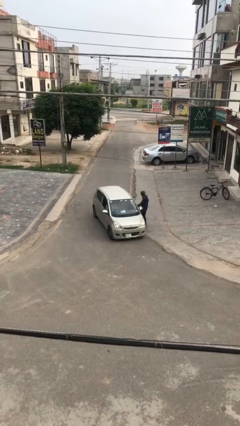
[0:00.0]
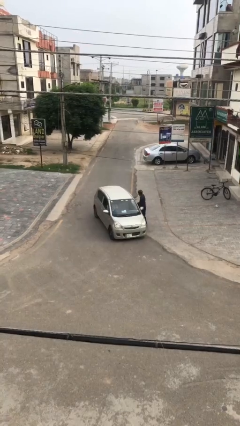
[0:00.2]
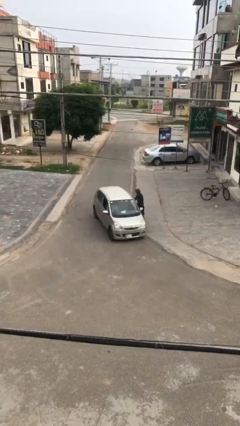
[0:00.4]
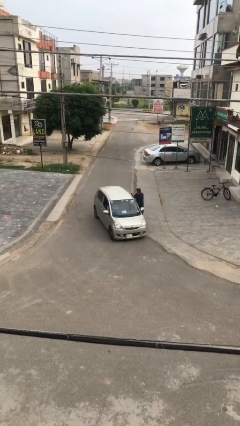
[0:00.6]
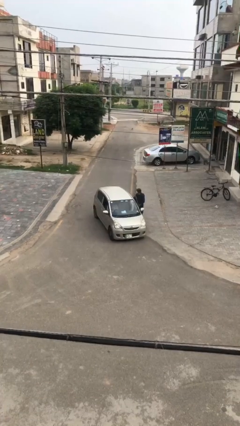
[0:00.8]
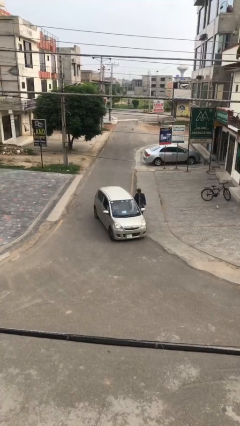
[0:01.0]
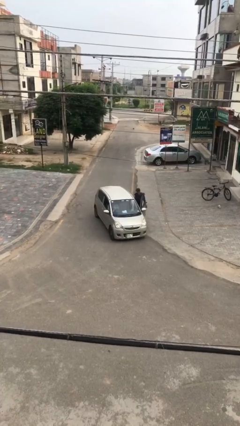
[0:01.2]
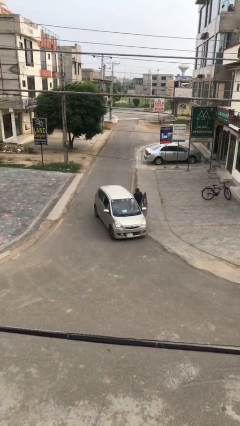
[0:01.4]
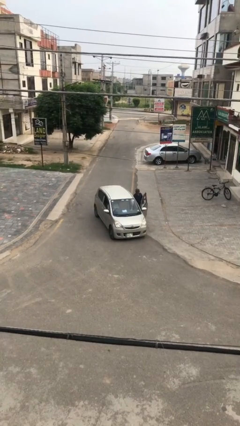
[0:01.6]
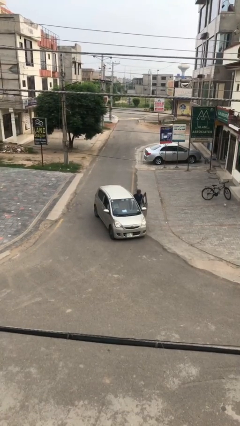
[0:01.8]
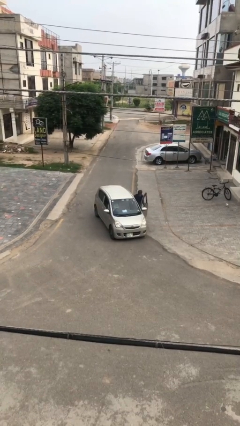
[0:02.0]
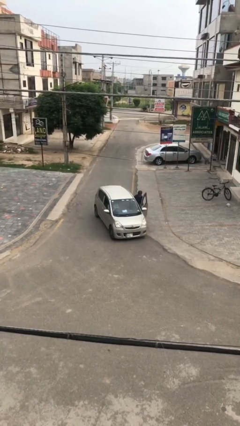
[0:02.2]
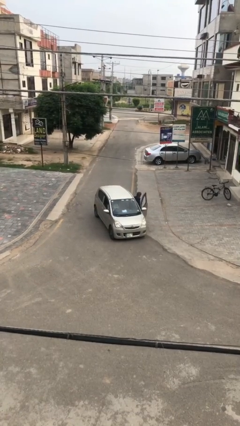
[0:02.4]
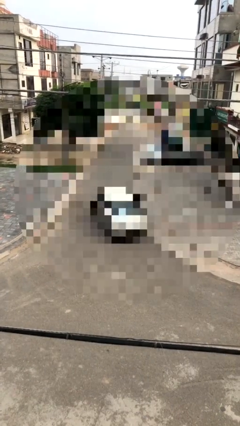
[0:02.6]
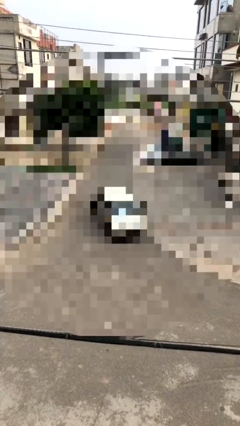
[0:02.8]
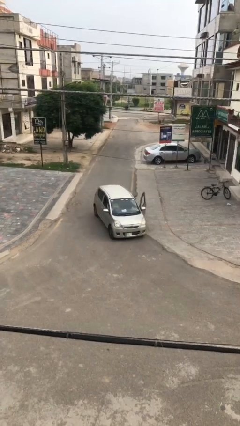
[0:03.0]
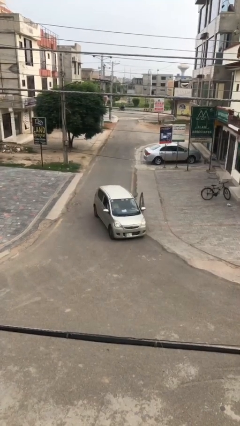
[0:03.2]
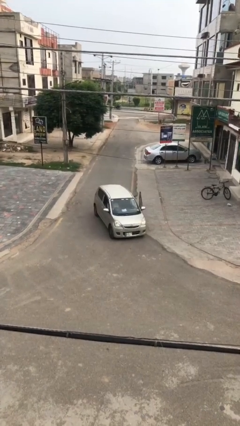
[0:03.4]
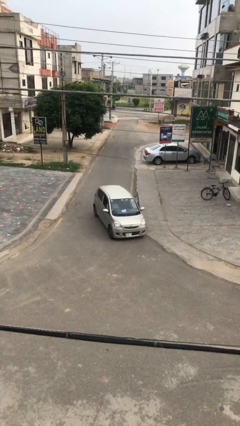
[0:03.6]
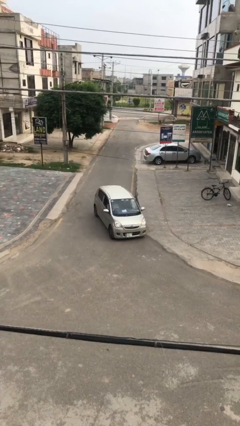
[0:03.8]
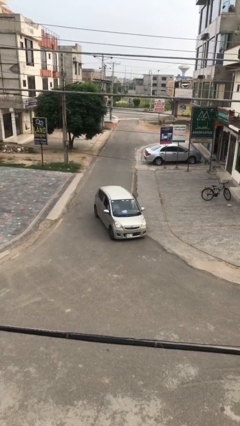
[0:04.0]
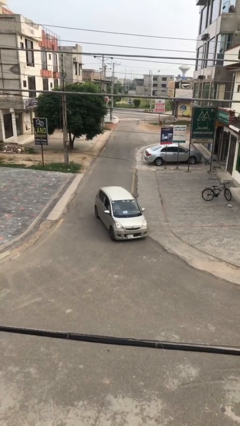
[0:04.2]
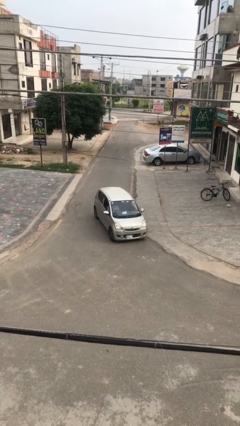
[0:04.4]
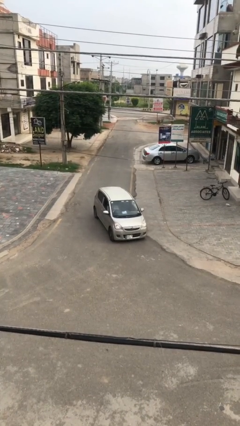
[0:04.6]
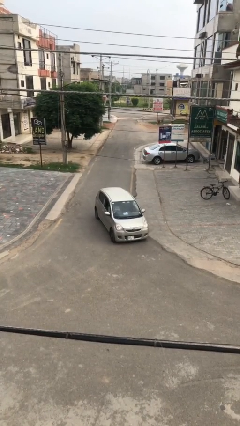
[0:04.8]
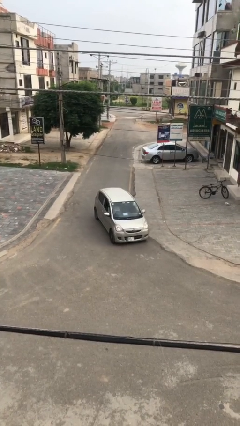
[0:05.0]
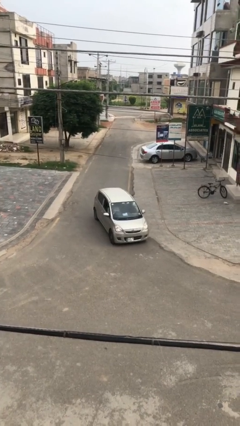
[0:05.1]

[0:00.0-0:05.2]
car picks up person

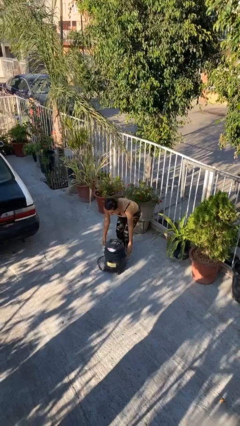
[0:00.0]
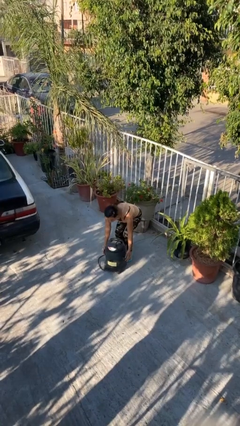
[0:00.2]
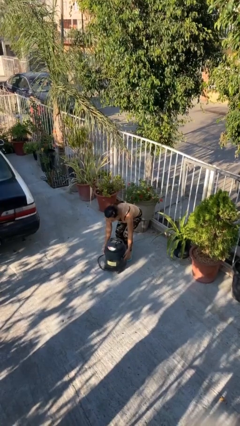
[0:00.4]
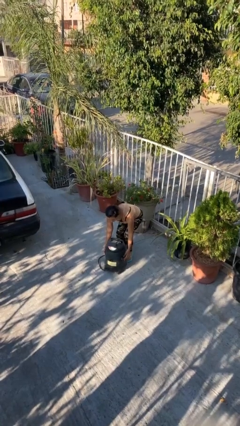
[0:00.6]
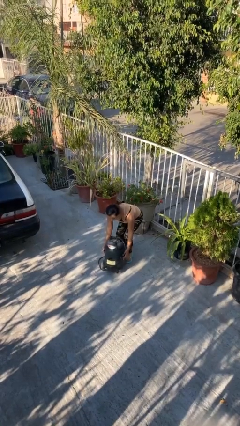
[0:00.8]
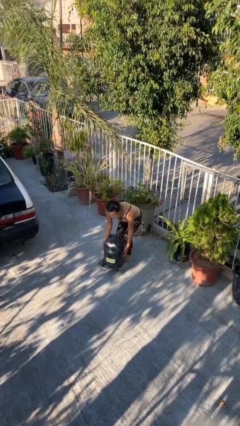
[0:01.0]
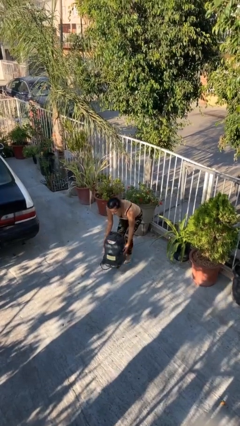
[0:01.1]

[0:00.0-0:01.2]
person picks up object from floor

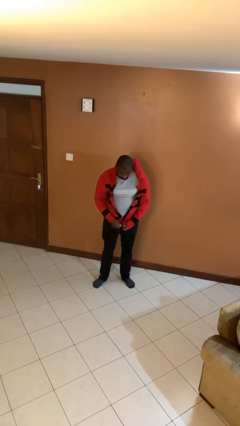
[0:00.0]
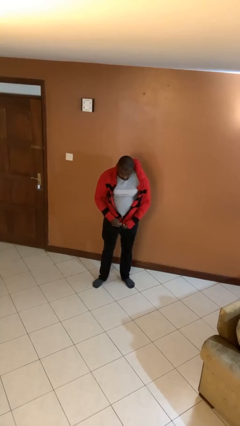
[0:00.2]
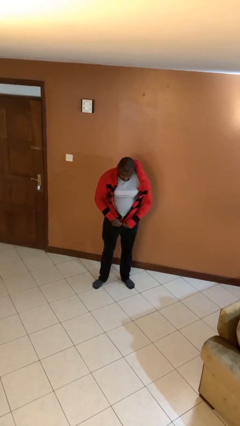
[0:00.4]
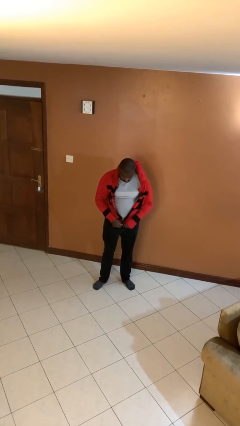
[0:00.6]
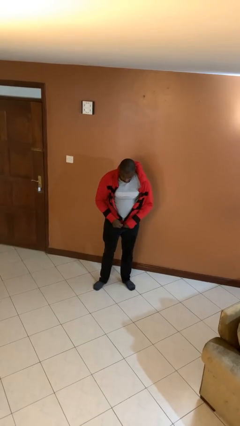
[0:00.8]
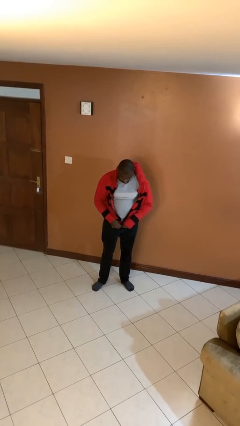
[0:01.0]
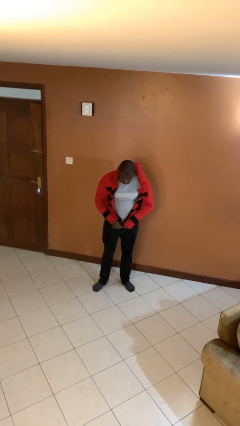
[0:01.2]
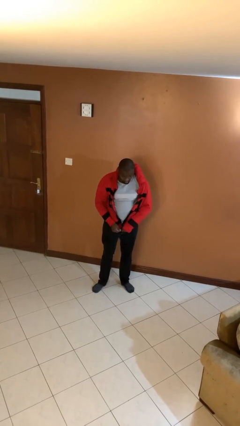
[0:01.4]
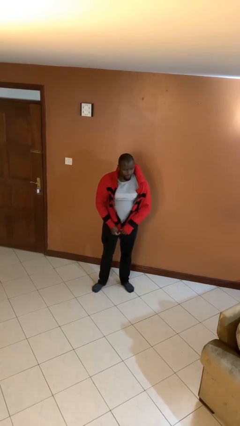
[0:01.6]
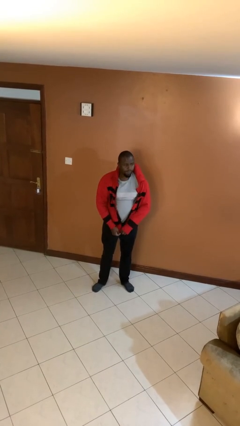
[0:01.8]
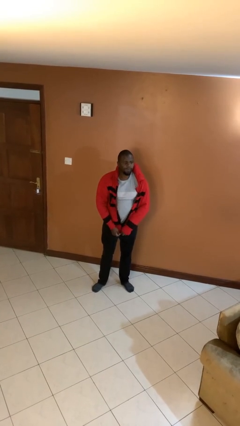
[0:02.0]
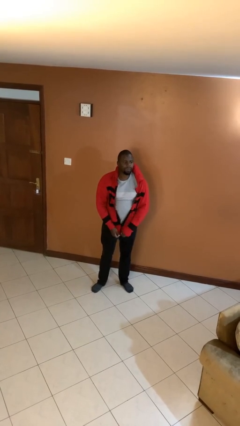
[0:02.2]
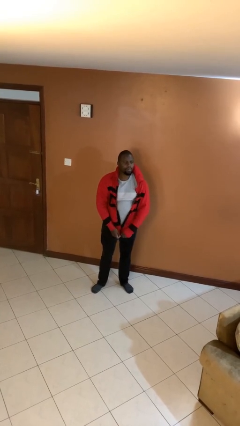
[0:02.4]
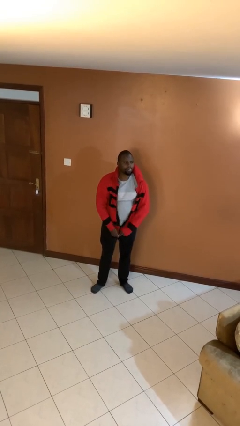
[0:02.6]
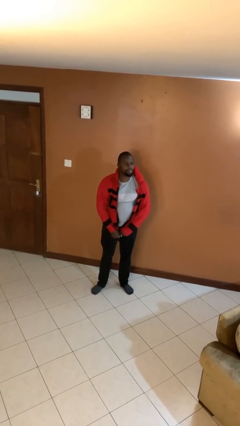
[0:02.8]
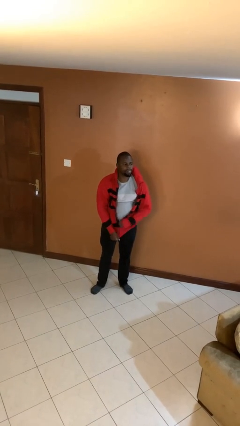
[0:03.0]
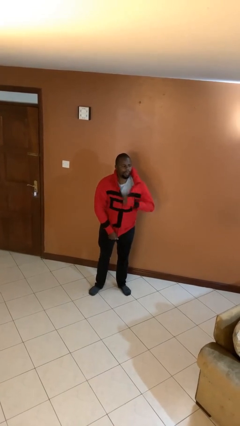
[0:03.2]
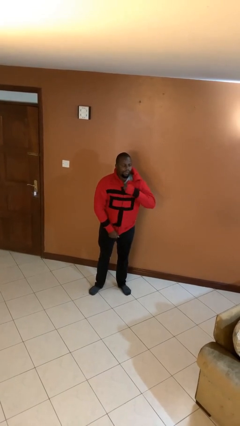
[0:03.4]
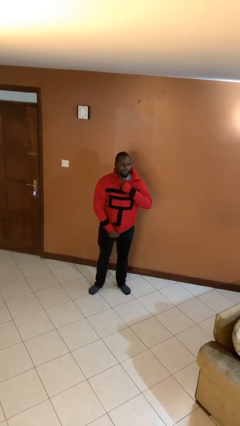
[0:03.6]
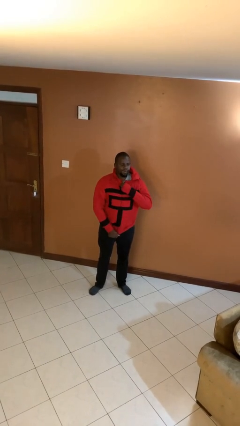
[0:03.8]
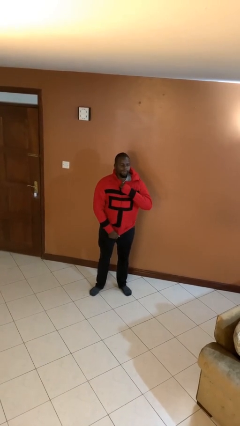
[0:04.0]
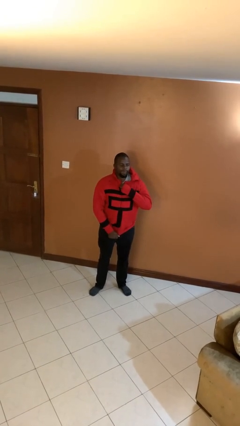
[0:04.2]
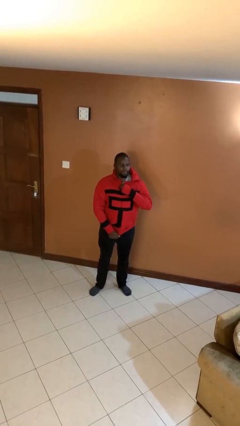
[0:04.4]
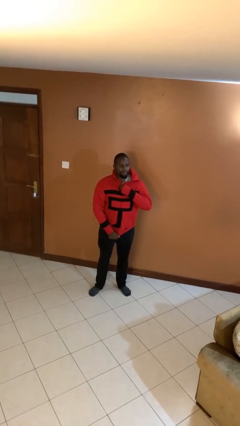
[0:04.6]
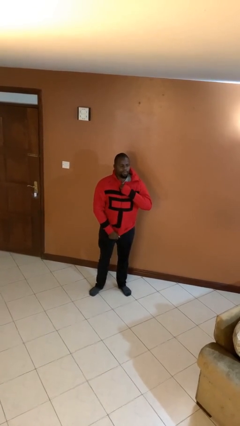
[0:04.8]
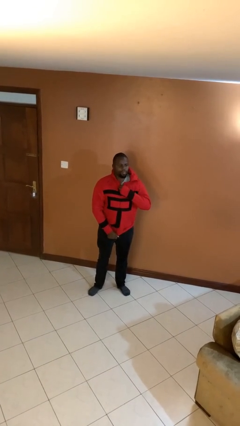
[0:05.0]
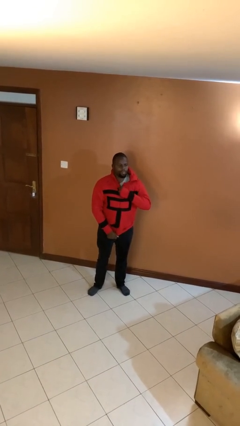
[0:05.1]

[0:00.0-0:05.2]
person zips up jacket

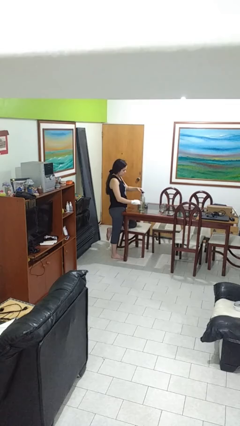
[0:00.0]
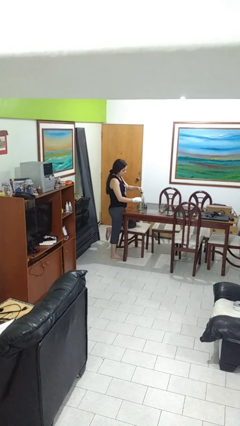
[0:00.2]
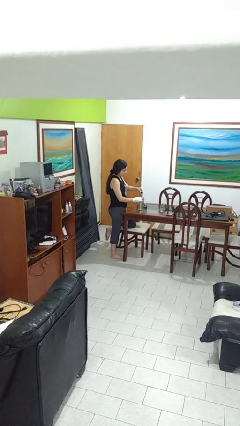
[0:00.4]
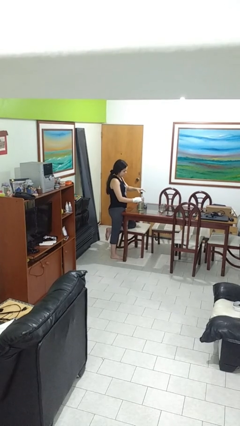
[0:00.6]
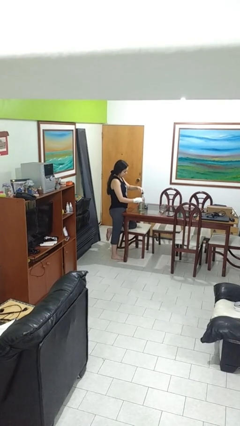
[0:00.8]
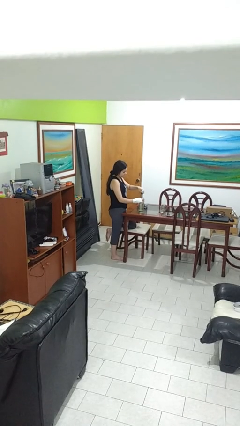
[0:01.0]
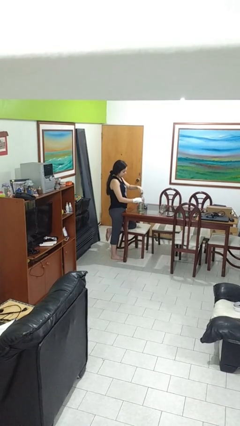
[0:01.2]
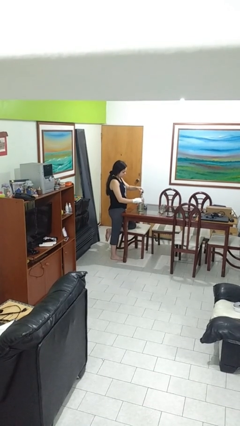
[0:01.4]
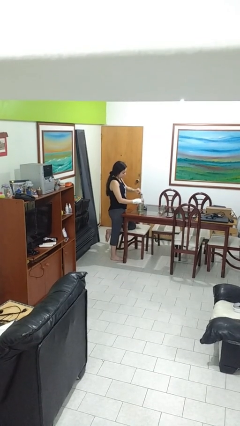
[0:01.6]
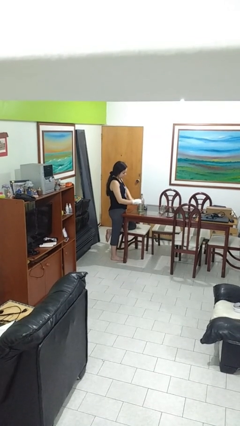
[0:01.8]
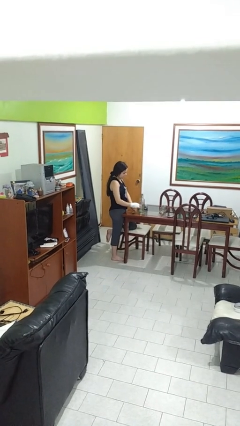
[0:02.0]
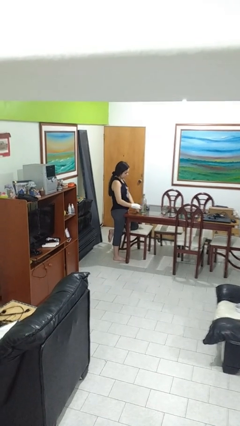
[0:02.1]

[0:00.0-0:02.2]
person unscrews lid from bottle

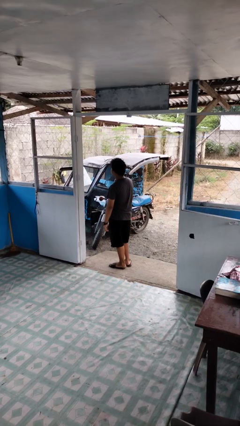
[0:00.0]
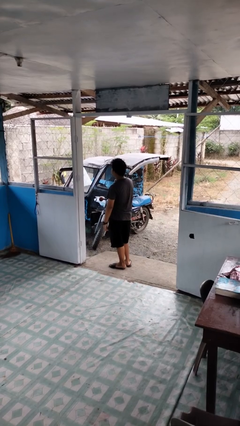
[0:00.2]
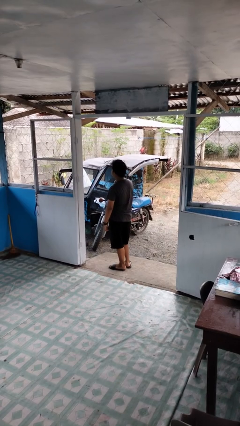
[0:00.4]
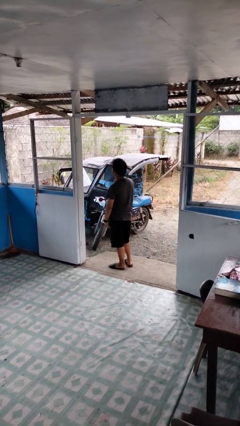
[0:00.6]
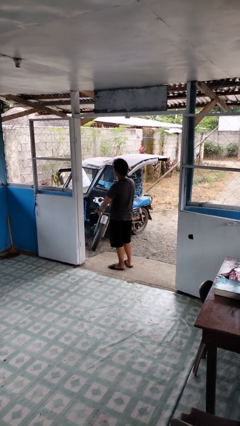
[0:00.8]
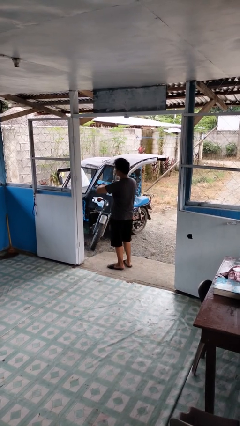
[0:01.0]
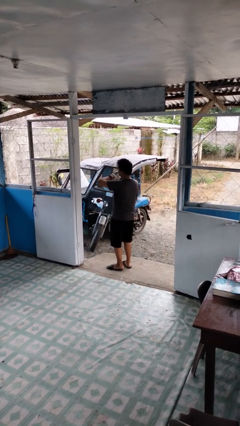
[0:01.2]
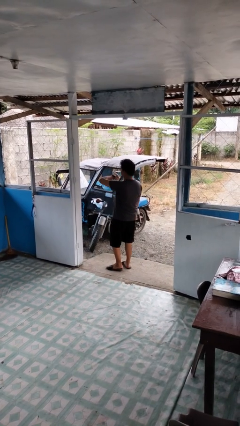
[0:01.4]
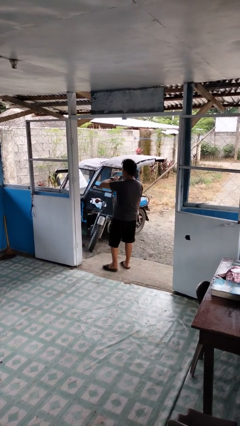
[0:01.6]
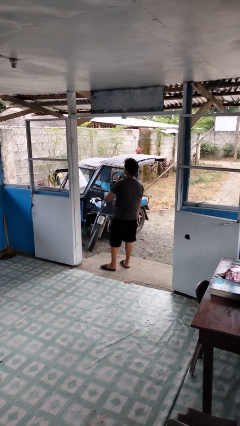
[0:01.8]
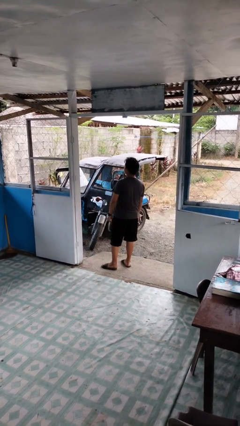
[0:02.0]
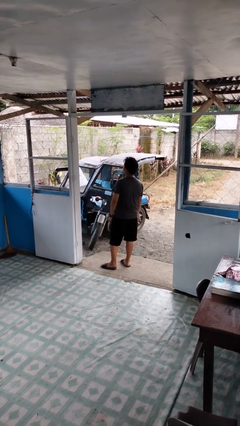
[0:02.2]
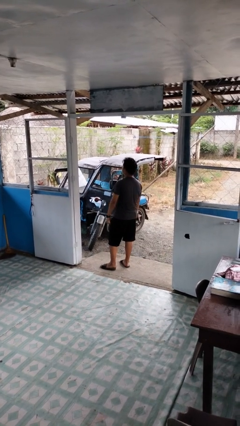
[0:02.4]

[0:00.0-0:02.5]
person looks at wristwatch

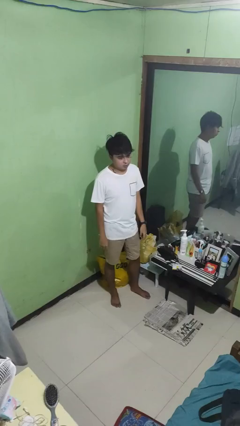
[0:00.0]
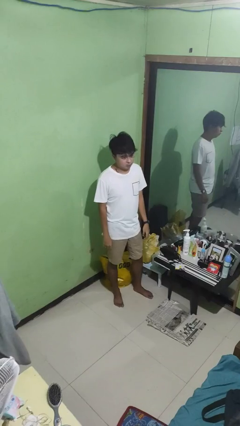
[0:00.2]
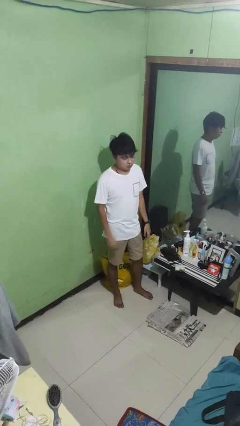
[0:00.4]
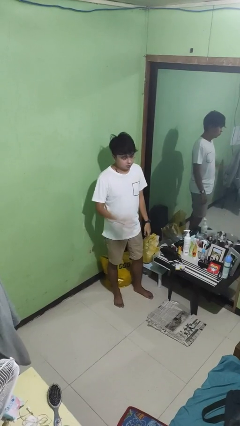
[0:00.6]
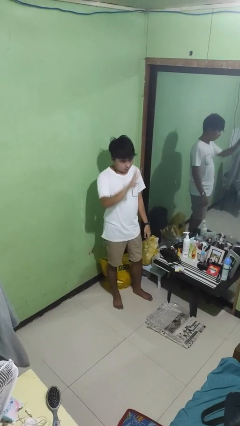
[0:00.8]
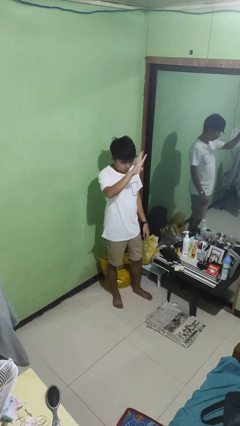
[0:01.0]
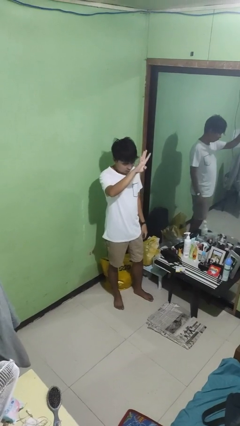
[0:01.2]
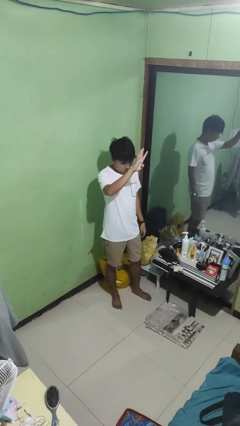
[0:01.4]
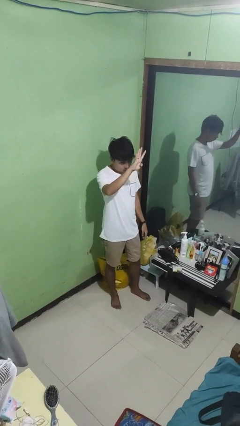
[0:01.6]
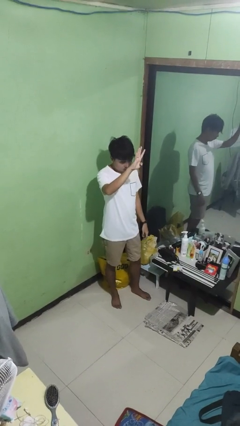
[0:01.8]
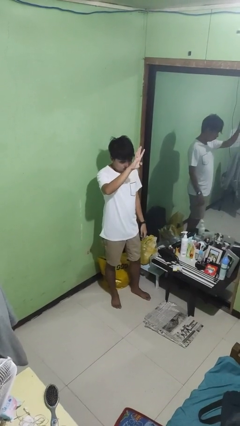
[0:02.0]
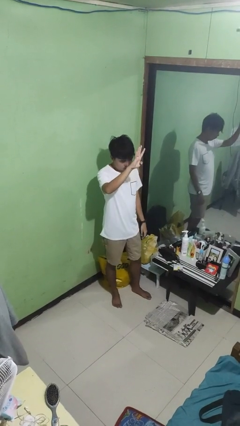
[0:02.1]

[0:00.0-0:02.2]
person gestures number four
